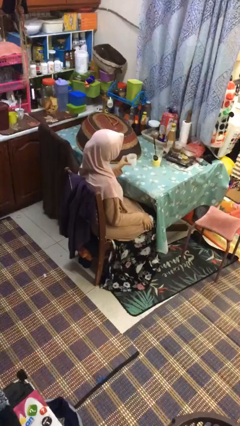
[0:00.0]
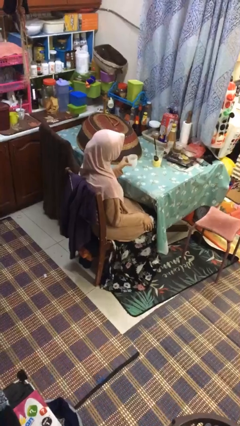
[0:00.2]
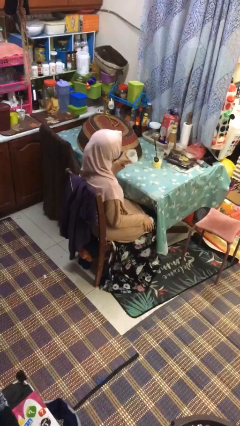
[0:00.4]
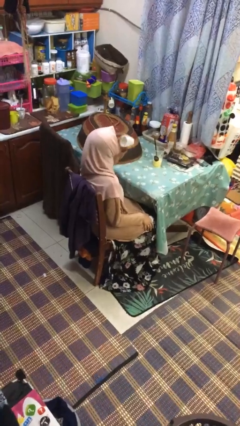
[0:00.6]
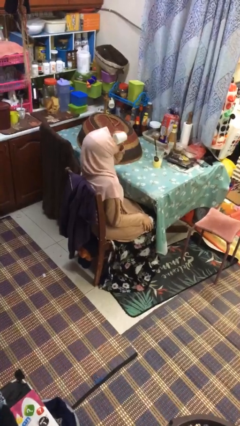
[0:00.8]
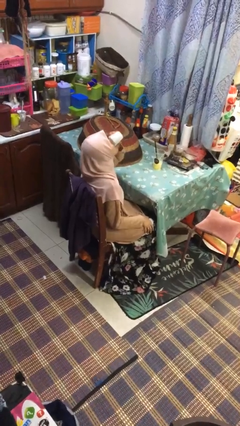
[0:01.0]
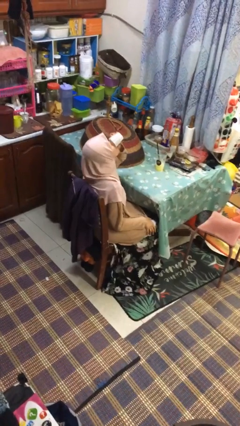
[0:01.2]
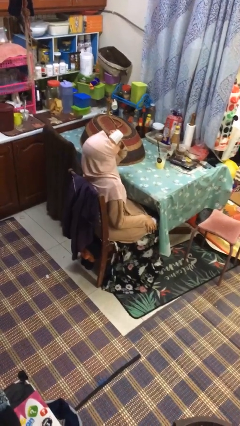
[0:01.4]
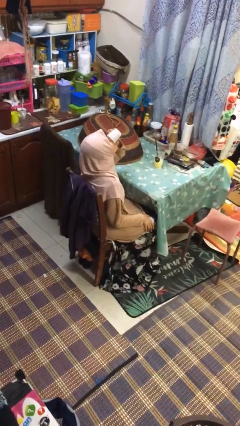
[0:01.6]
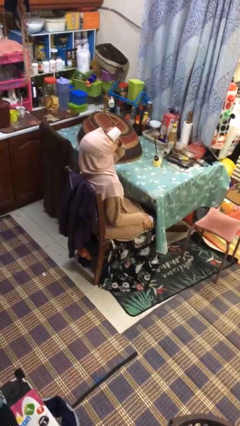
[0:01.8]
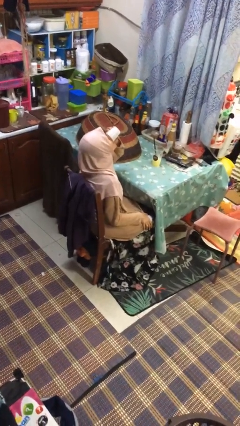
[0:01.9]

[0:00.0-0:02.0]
person drinks from shotglass

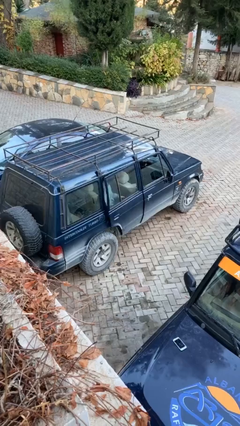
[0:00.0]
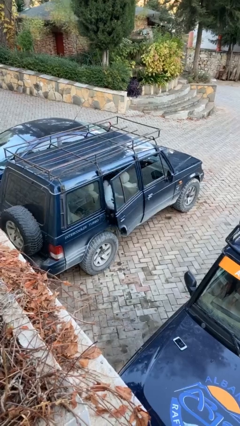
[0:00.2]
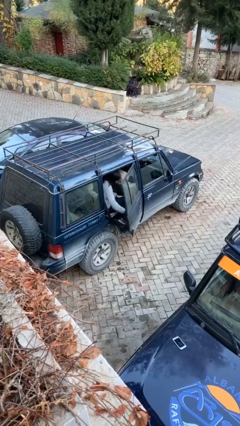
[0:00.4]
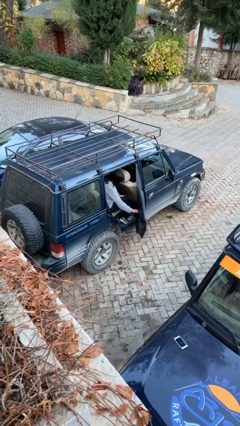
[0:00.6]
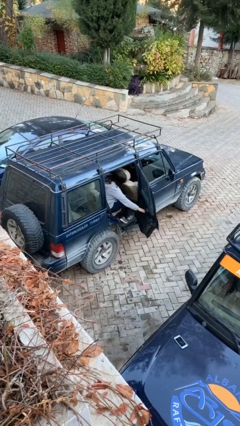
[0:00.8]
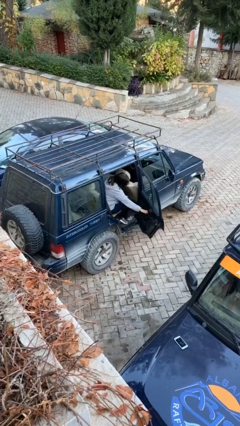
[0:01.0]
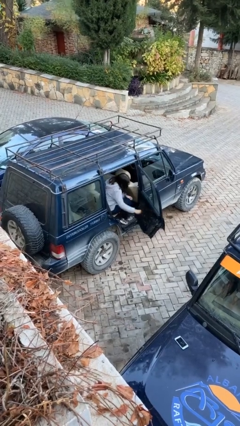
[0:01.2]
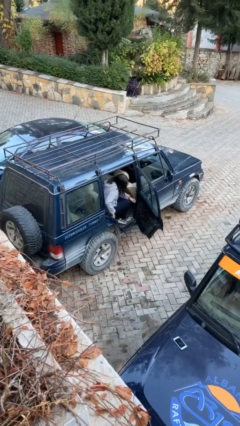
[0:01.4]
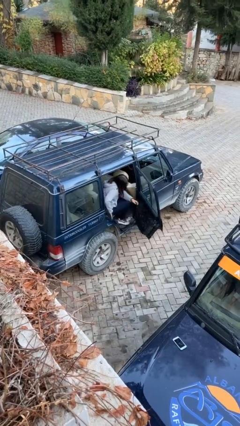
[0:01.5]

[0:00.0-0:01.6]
person opens car door

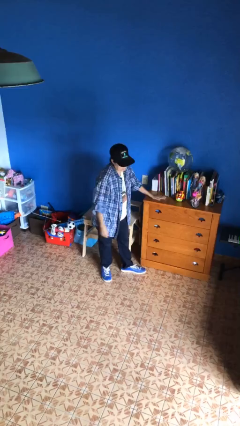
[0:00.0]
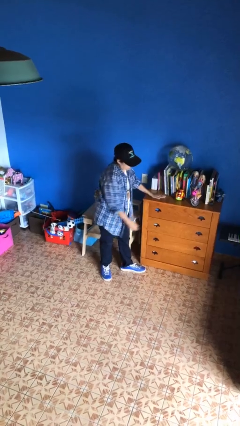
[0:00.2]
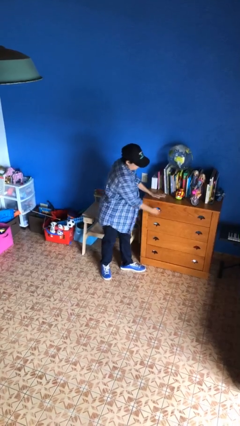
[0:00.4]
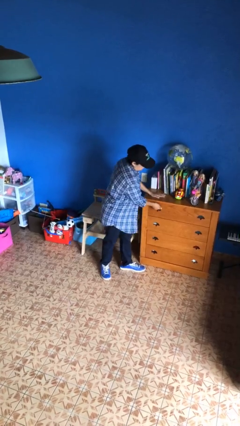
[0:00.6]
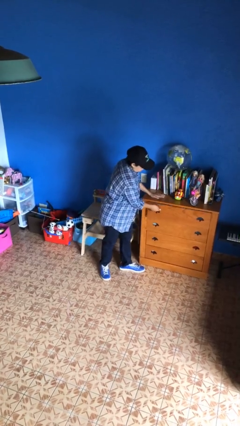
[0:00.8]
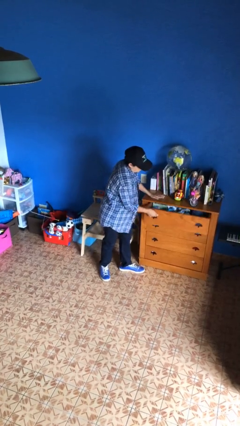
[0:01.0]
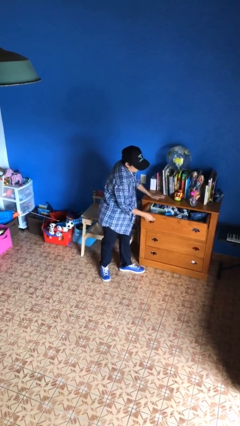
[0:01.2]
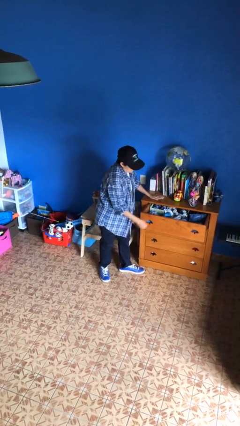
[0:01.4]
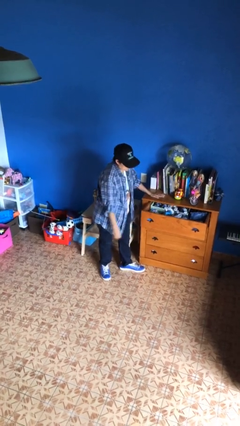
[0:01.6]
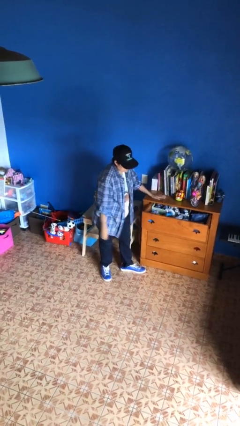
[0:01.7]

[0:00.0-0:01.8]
person opens dresser drawer

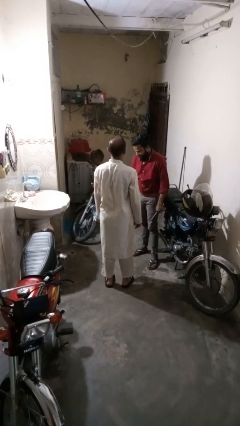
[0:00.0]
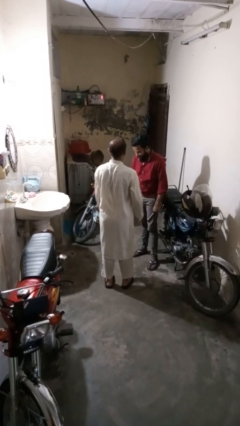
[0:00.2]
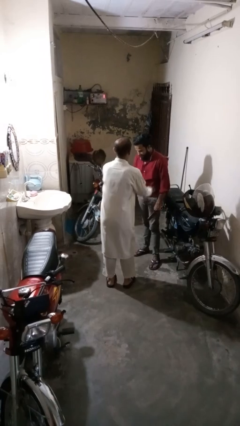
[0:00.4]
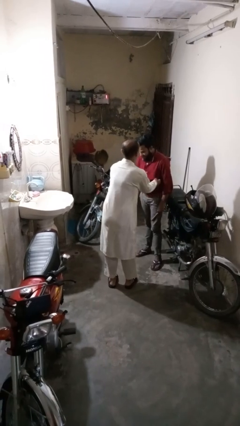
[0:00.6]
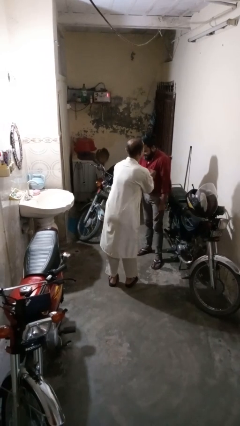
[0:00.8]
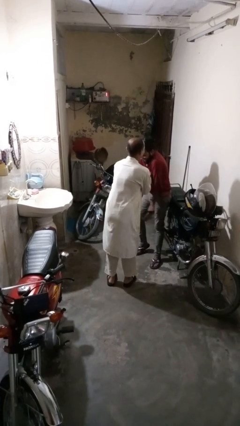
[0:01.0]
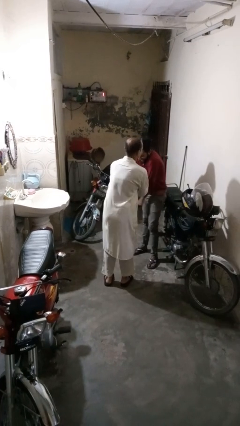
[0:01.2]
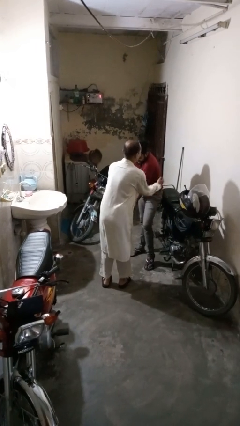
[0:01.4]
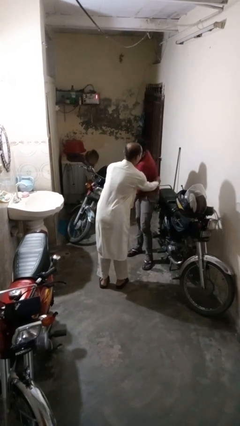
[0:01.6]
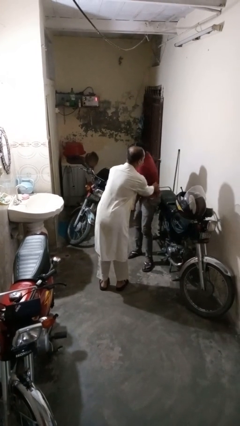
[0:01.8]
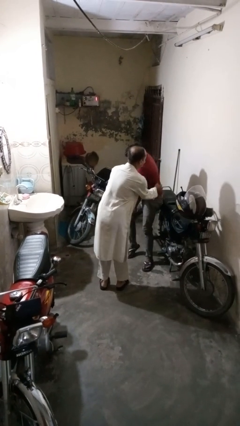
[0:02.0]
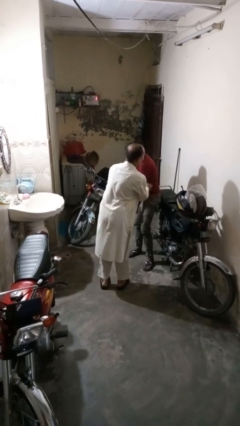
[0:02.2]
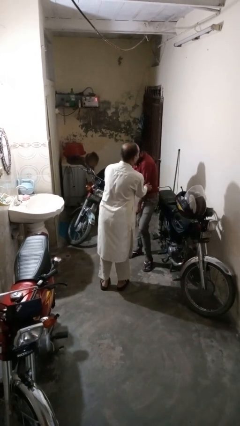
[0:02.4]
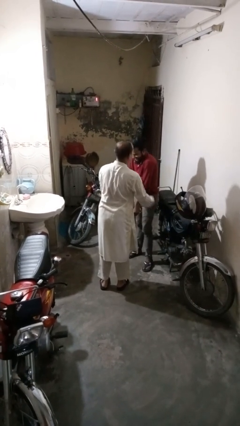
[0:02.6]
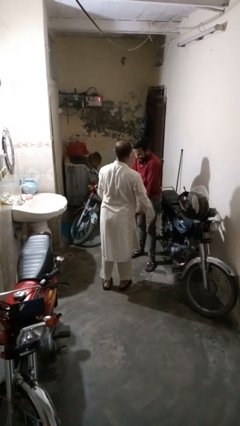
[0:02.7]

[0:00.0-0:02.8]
person tickles person

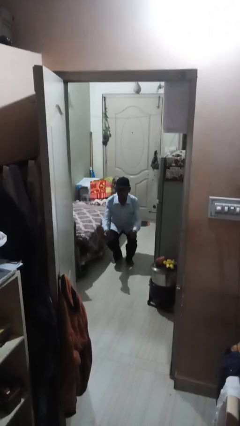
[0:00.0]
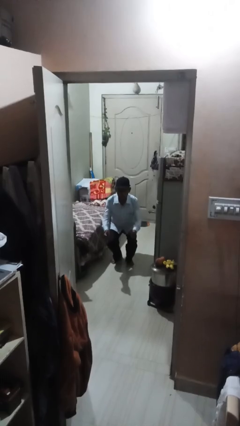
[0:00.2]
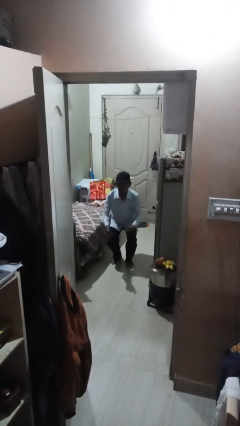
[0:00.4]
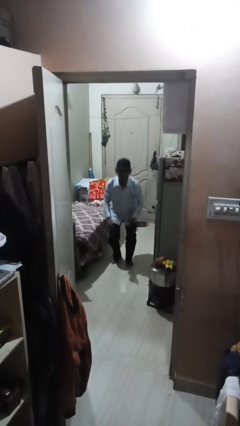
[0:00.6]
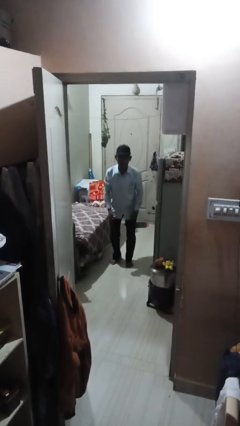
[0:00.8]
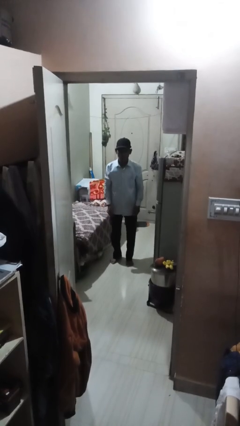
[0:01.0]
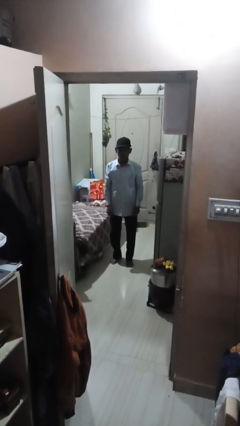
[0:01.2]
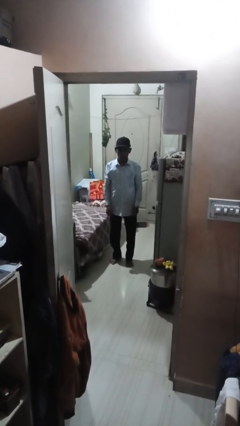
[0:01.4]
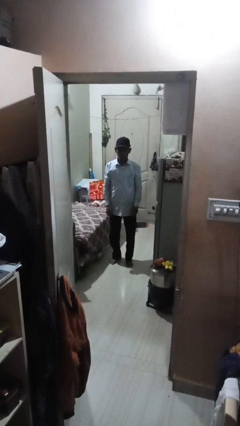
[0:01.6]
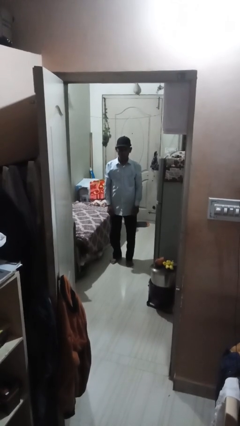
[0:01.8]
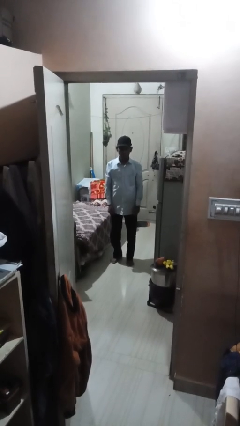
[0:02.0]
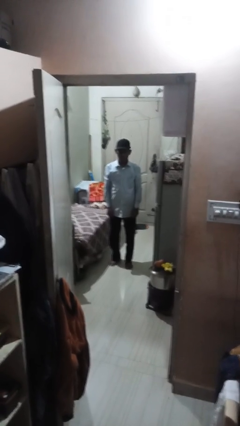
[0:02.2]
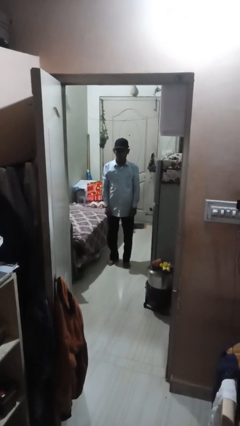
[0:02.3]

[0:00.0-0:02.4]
person stands up

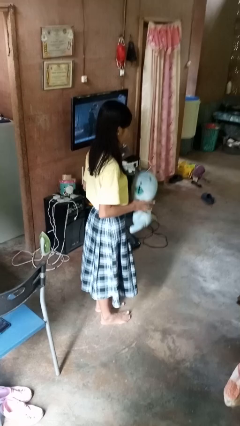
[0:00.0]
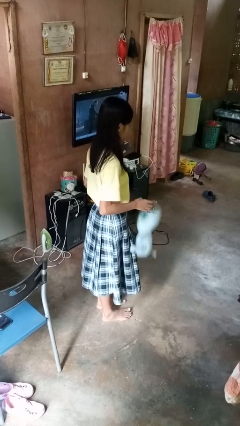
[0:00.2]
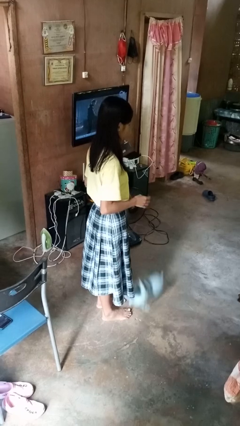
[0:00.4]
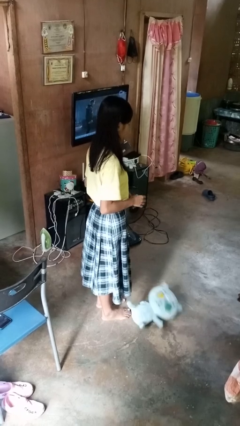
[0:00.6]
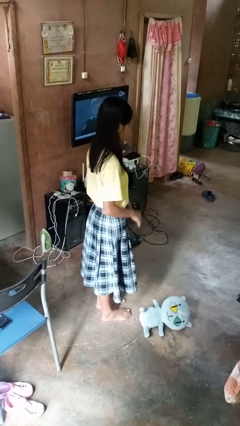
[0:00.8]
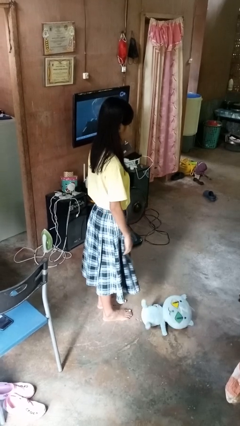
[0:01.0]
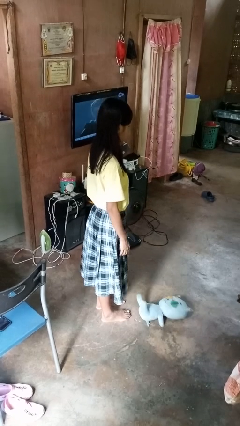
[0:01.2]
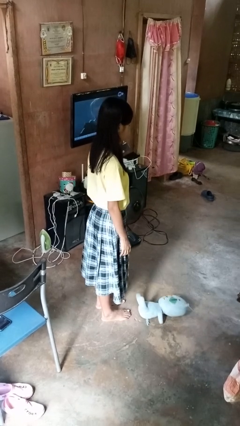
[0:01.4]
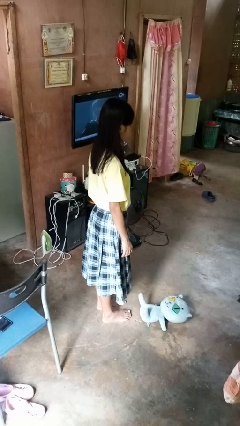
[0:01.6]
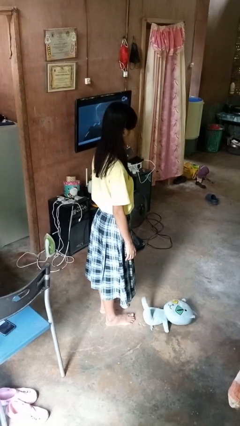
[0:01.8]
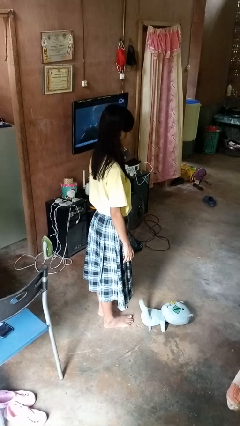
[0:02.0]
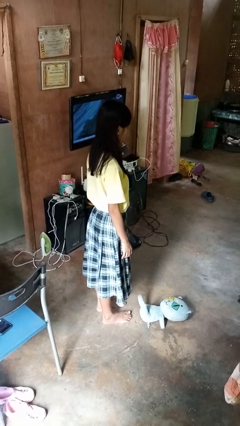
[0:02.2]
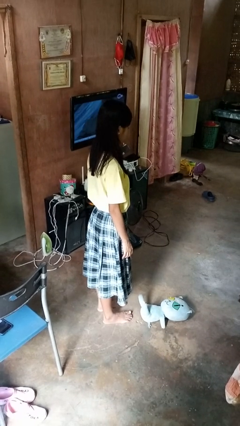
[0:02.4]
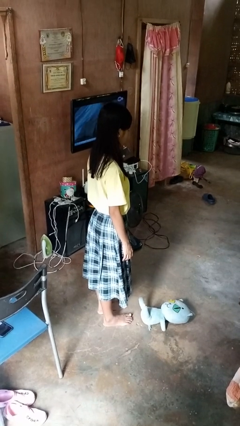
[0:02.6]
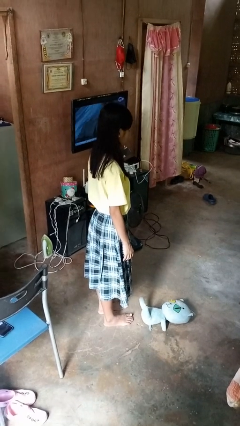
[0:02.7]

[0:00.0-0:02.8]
person drops object

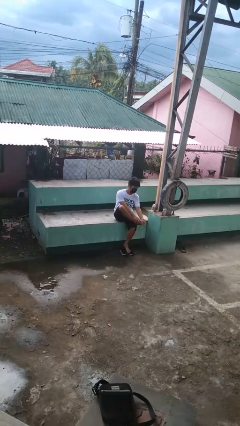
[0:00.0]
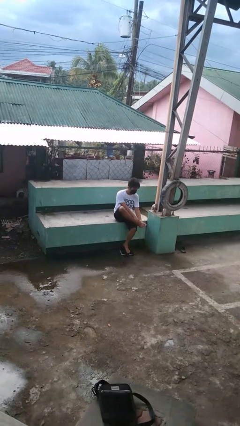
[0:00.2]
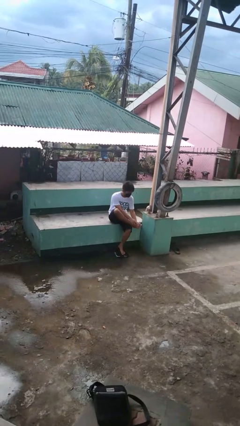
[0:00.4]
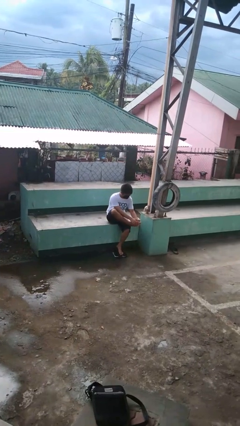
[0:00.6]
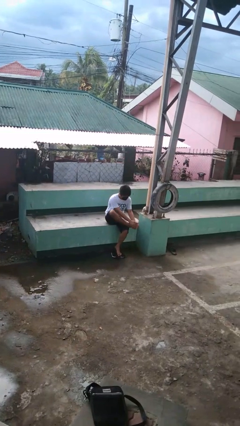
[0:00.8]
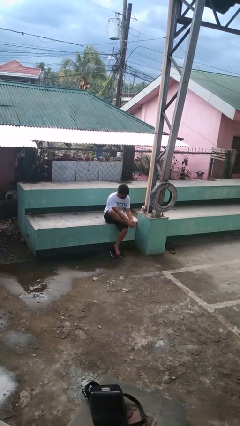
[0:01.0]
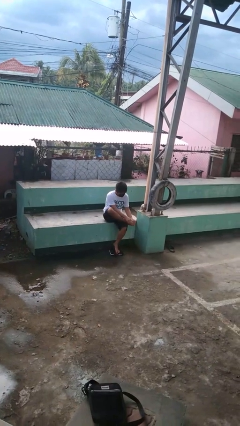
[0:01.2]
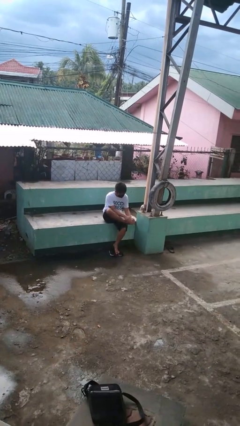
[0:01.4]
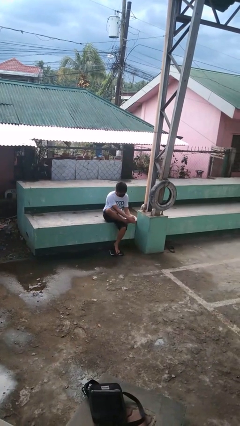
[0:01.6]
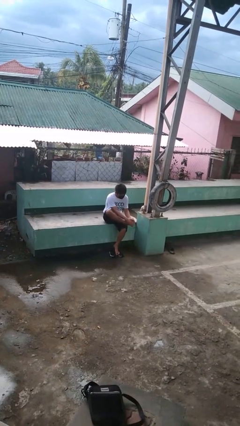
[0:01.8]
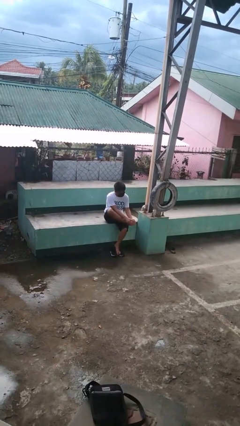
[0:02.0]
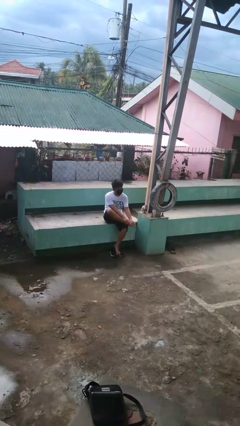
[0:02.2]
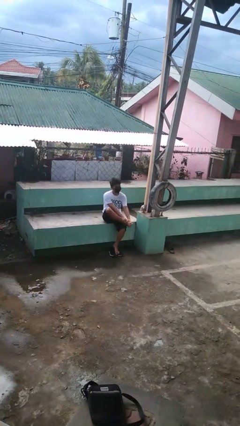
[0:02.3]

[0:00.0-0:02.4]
person rubs foot

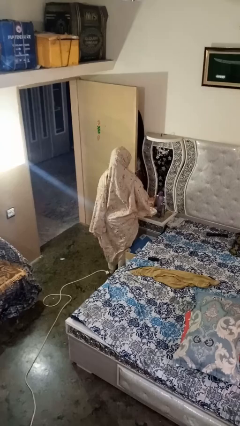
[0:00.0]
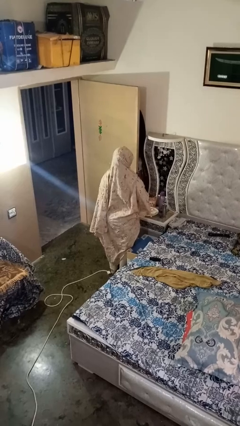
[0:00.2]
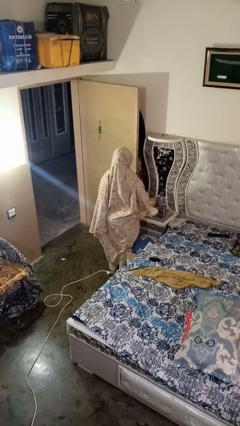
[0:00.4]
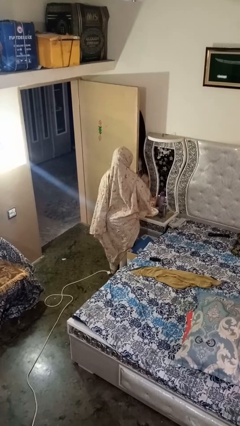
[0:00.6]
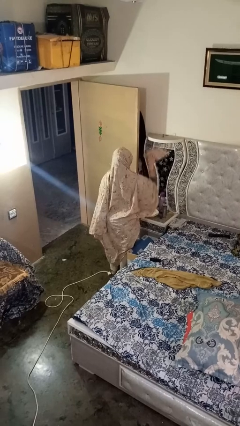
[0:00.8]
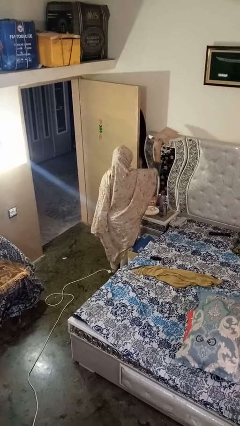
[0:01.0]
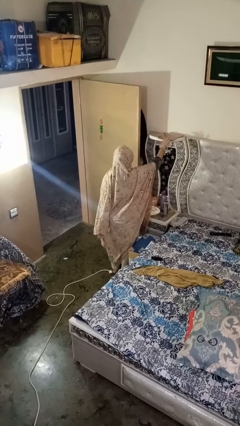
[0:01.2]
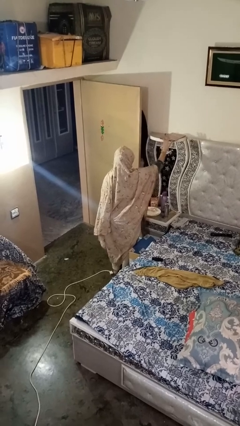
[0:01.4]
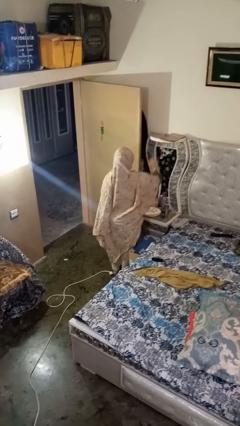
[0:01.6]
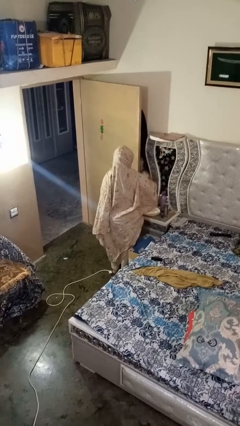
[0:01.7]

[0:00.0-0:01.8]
person puts down object on shelf
